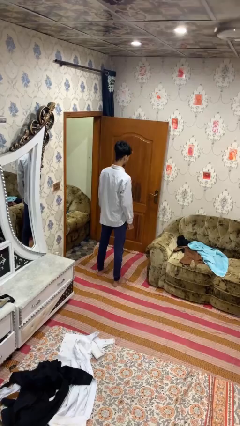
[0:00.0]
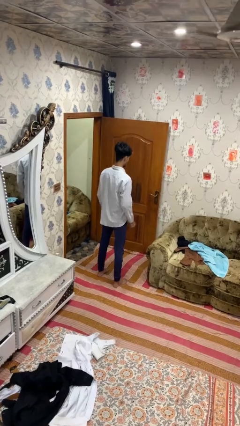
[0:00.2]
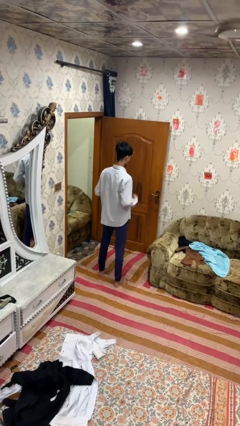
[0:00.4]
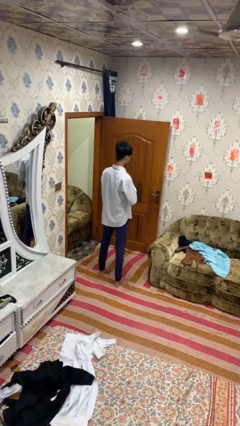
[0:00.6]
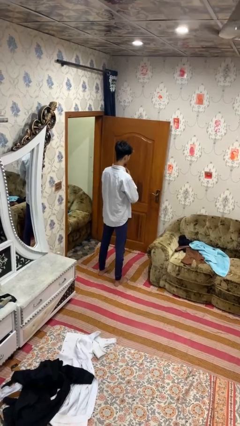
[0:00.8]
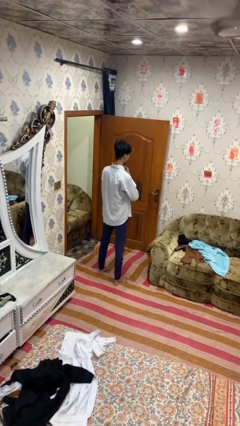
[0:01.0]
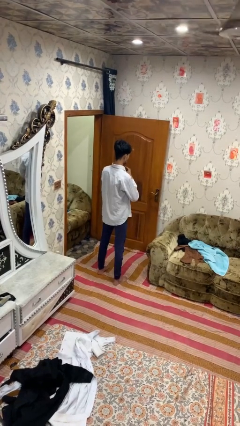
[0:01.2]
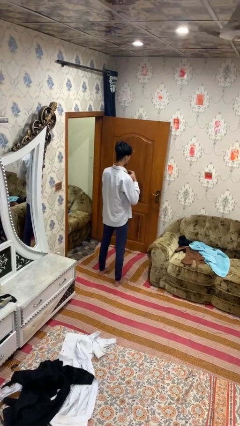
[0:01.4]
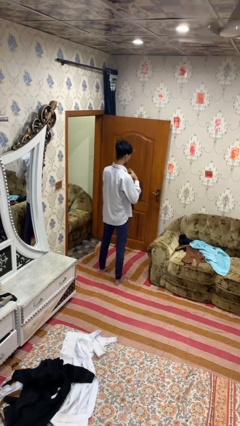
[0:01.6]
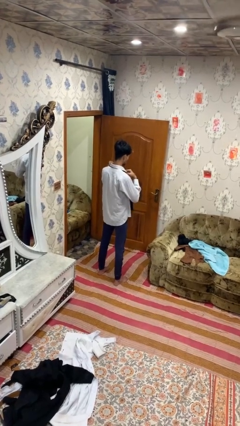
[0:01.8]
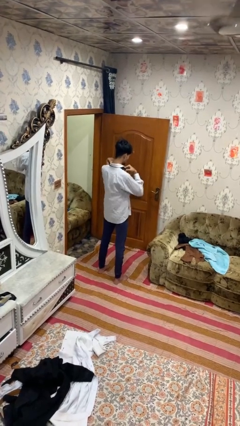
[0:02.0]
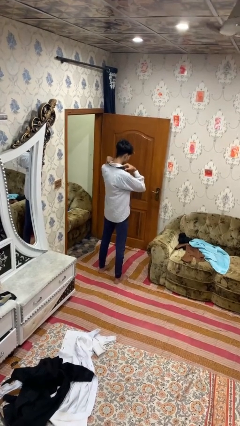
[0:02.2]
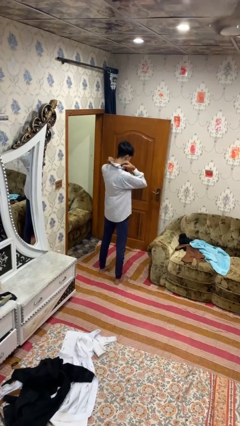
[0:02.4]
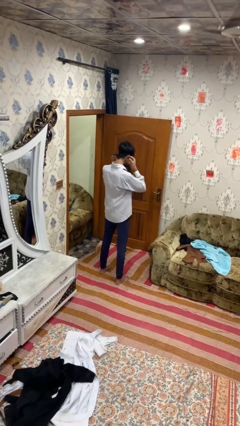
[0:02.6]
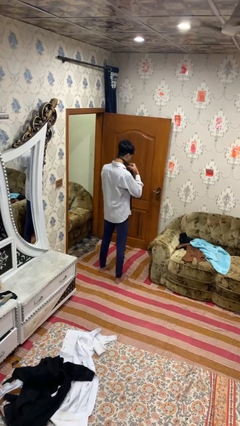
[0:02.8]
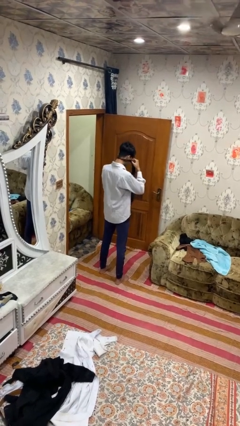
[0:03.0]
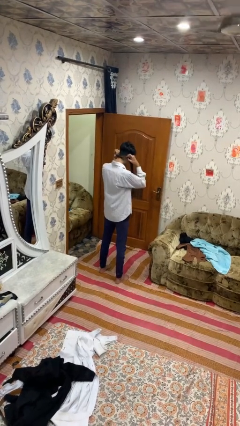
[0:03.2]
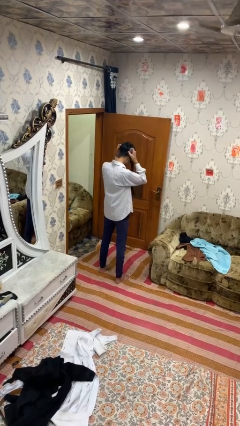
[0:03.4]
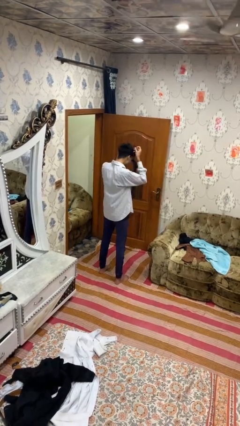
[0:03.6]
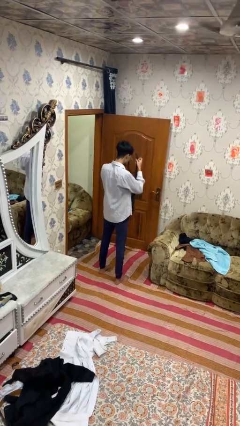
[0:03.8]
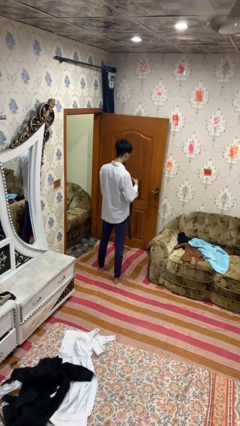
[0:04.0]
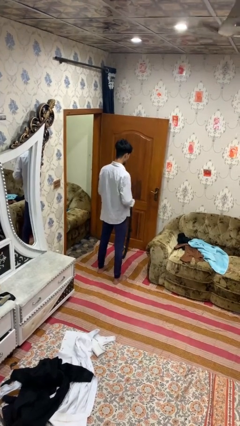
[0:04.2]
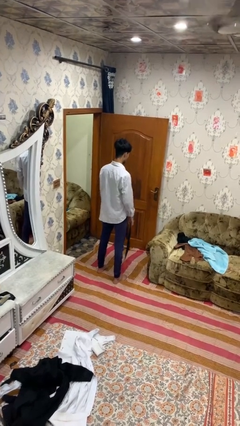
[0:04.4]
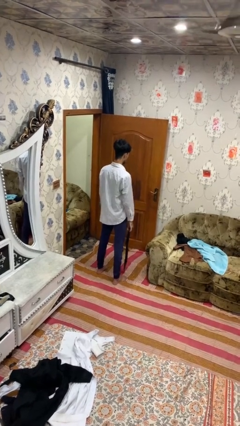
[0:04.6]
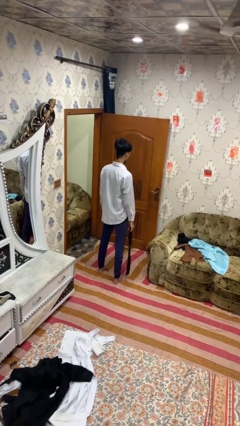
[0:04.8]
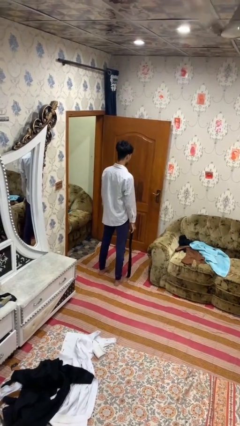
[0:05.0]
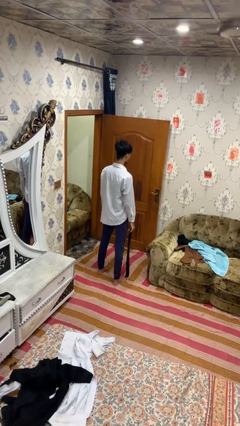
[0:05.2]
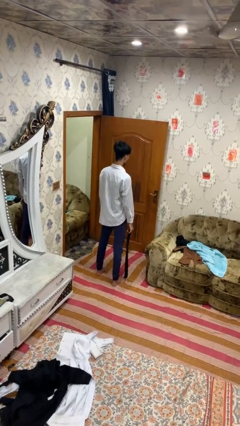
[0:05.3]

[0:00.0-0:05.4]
person takes off necktie

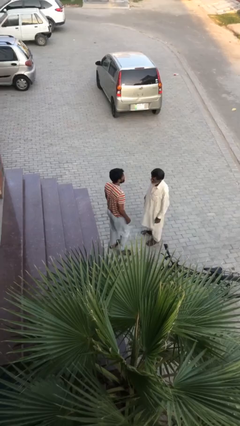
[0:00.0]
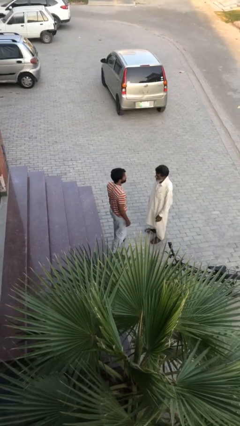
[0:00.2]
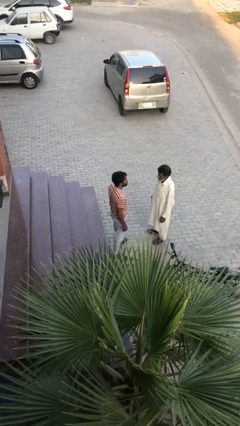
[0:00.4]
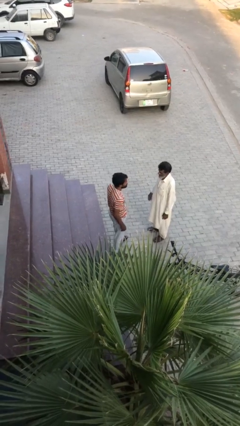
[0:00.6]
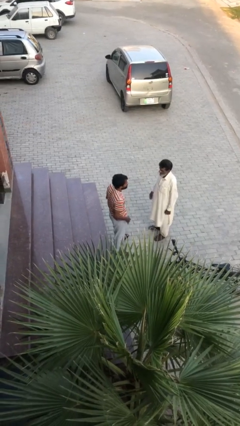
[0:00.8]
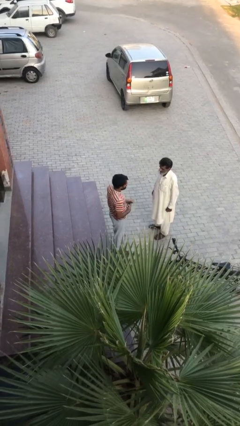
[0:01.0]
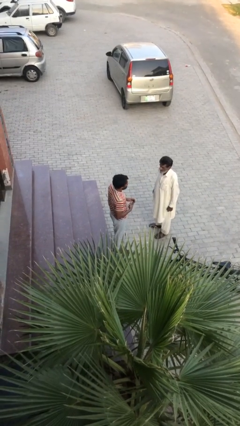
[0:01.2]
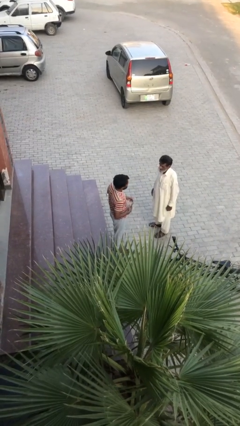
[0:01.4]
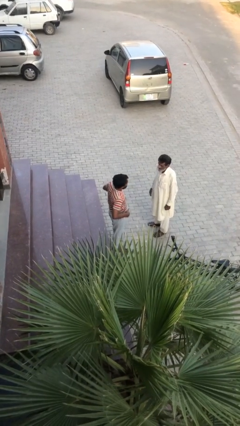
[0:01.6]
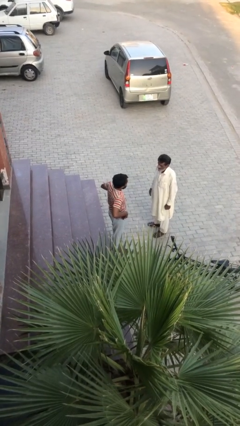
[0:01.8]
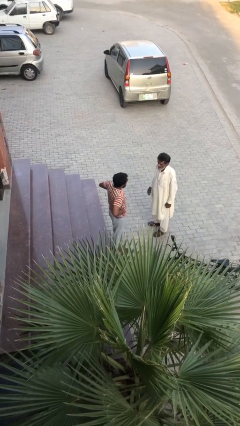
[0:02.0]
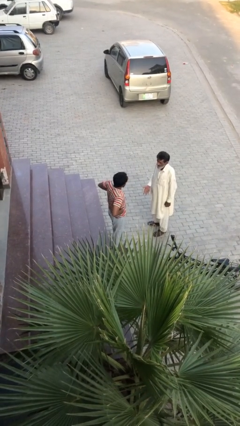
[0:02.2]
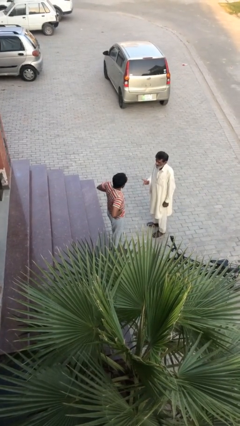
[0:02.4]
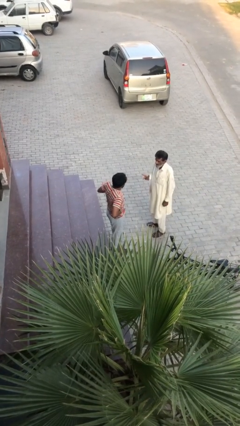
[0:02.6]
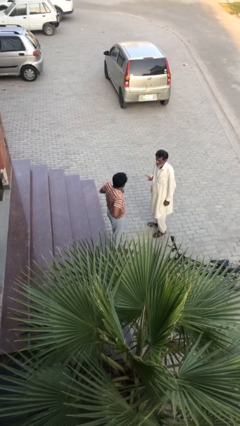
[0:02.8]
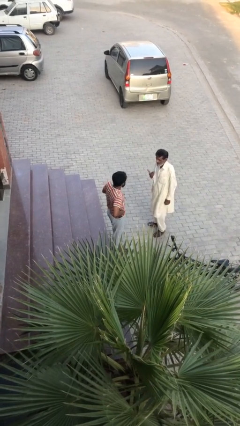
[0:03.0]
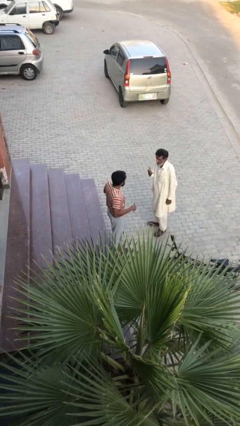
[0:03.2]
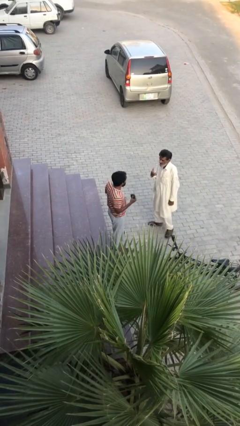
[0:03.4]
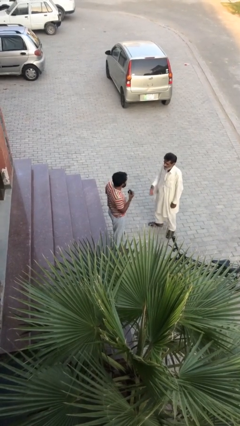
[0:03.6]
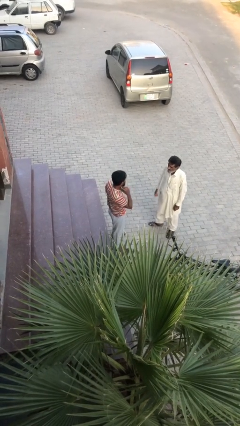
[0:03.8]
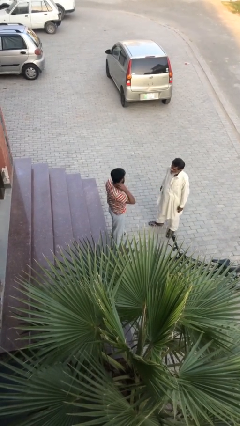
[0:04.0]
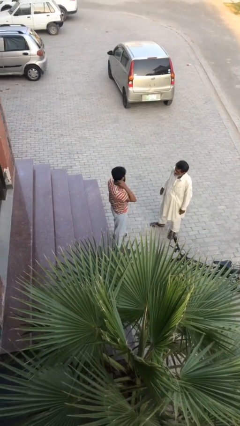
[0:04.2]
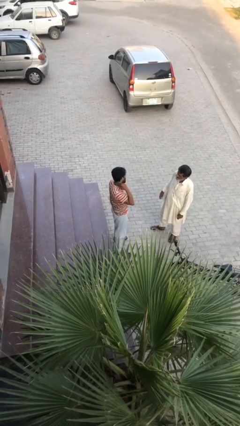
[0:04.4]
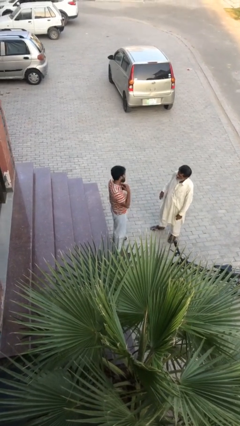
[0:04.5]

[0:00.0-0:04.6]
person talks to person

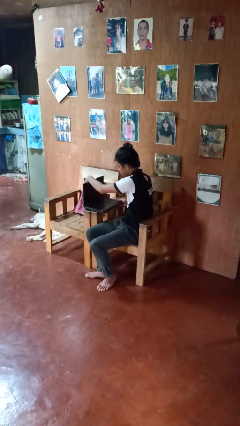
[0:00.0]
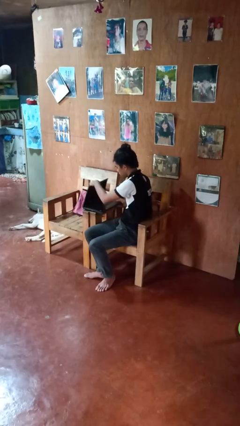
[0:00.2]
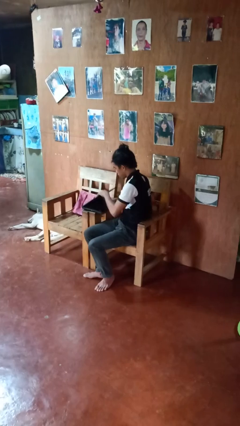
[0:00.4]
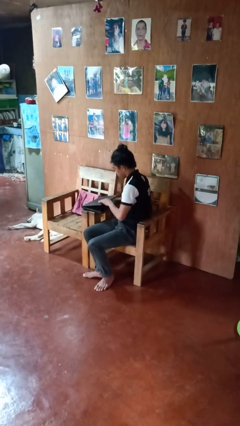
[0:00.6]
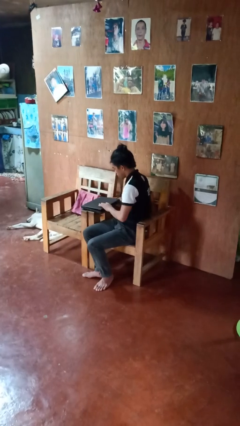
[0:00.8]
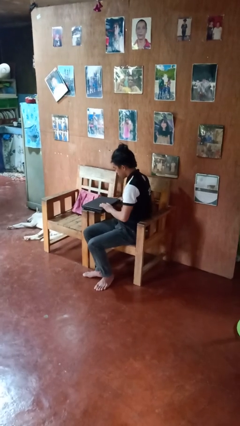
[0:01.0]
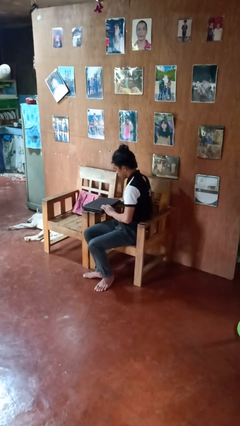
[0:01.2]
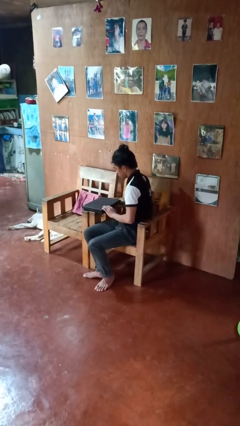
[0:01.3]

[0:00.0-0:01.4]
person closes laptop

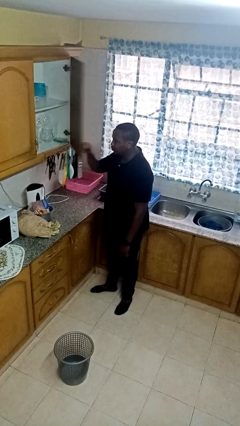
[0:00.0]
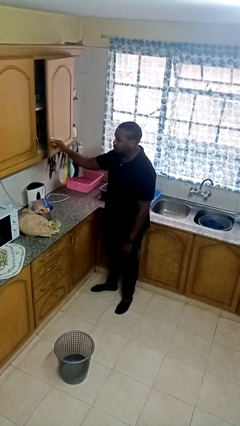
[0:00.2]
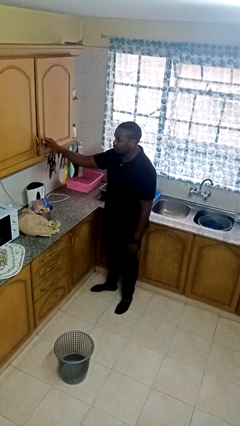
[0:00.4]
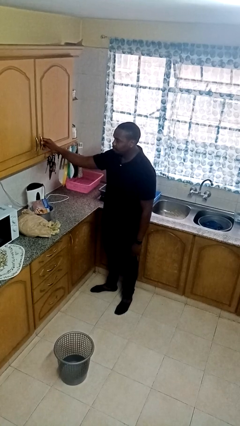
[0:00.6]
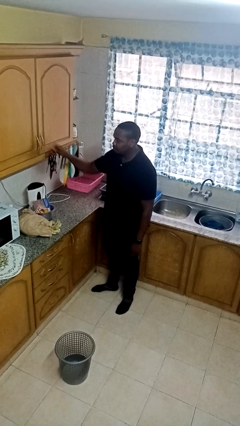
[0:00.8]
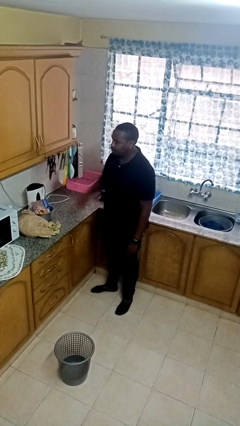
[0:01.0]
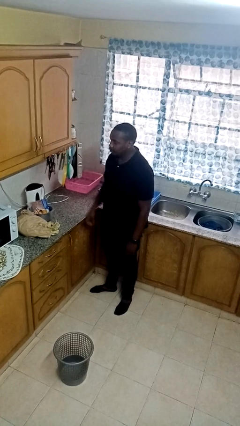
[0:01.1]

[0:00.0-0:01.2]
person closes cabinet

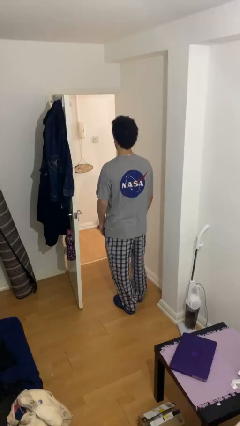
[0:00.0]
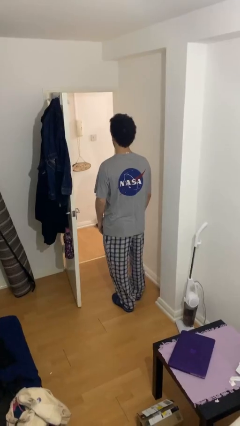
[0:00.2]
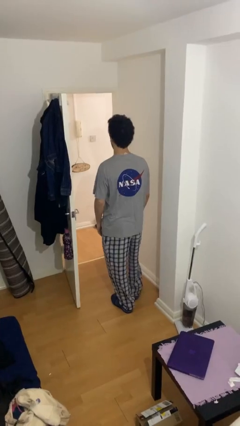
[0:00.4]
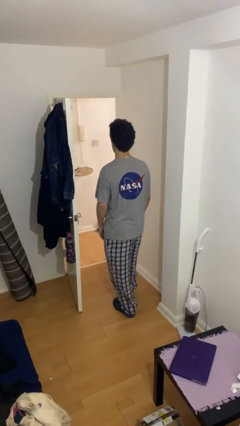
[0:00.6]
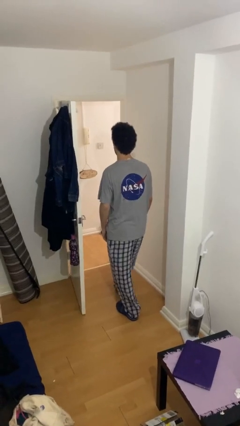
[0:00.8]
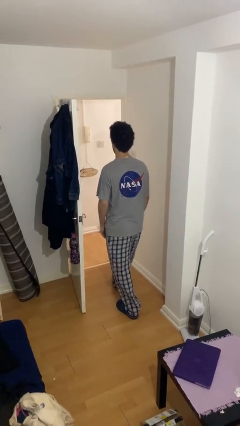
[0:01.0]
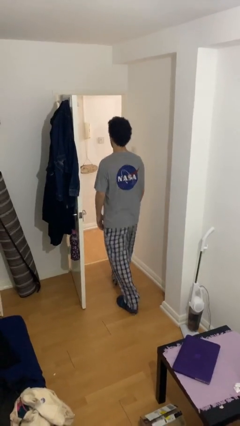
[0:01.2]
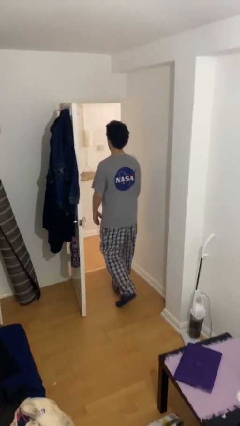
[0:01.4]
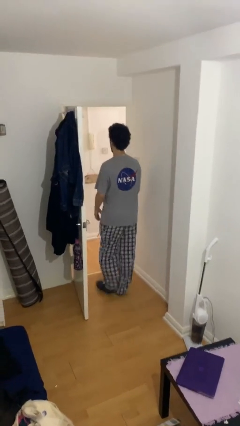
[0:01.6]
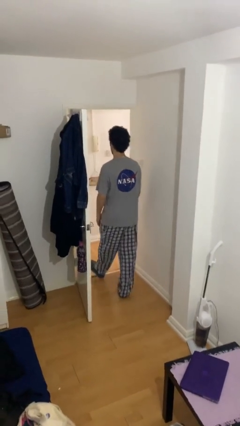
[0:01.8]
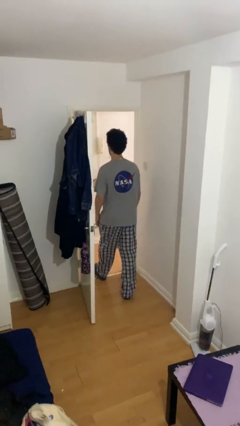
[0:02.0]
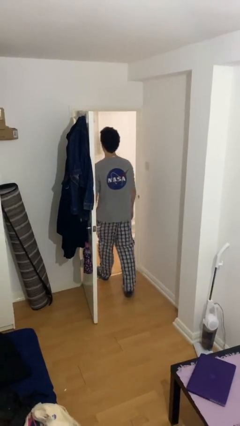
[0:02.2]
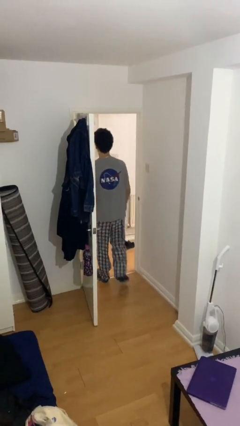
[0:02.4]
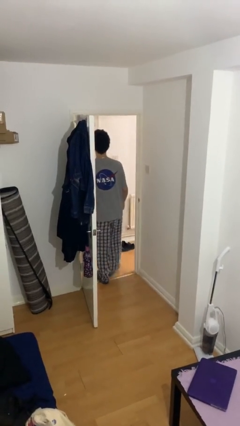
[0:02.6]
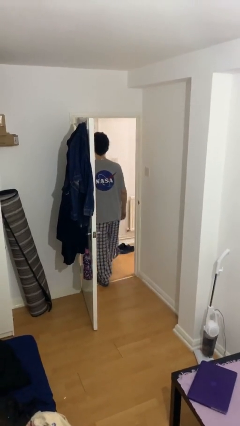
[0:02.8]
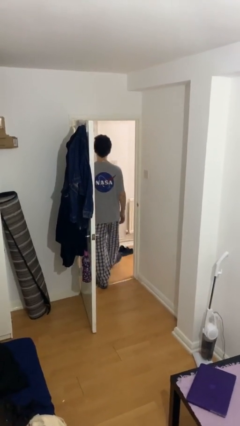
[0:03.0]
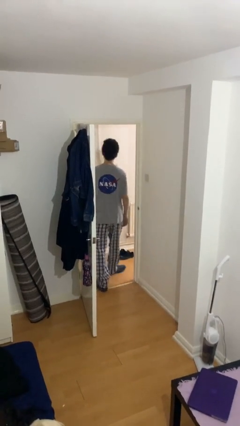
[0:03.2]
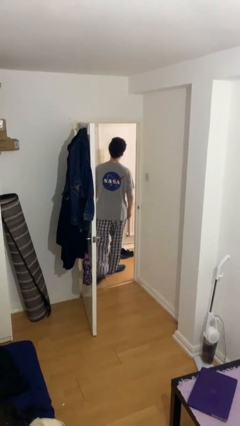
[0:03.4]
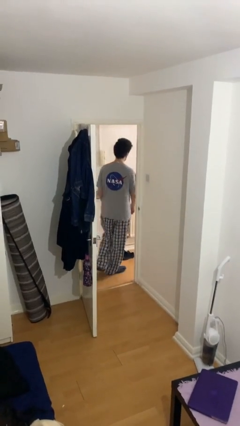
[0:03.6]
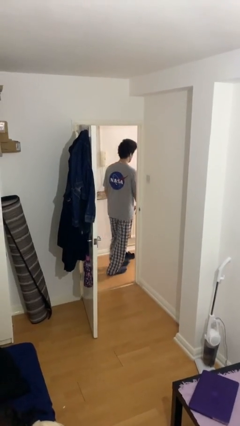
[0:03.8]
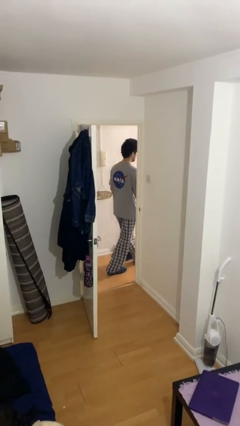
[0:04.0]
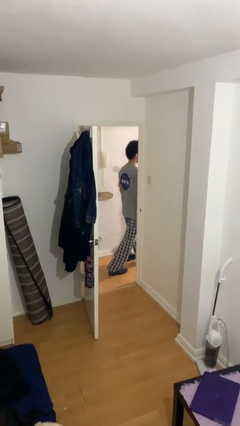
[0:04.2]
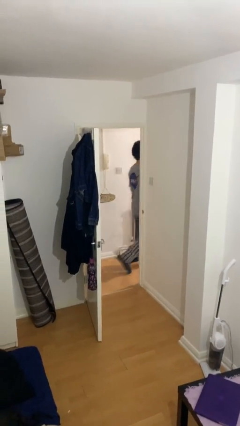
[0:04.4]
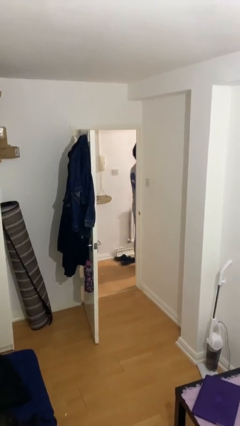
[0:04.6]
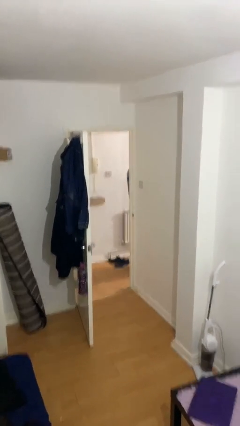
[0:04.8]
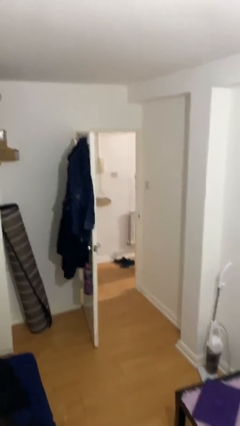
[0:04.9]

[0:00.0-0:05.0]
person exits scene through structure

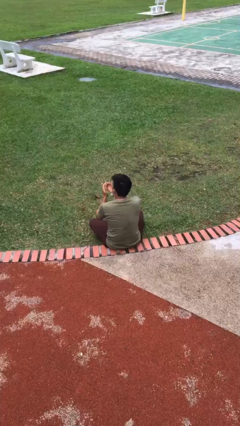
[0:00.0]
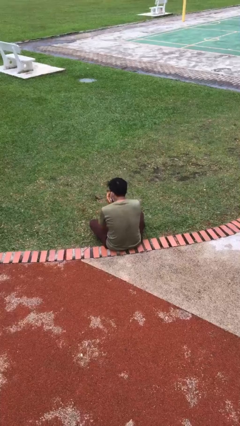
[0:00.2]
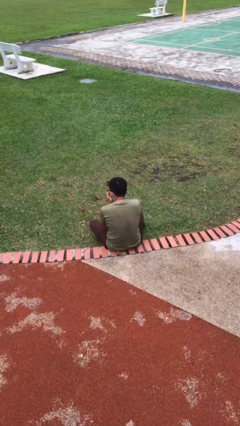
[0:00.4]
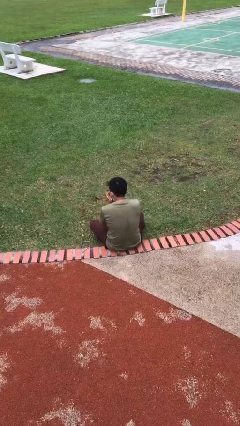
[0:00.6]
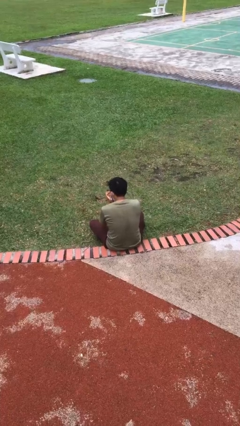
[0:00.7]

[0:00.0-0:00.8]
person sneezes into hand
